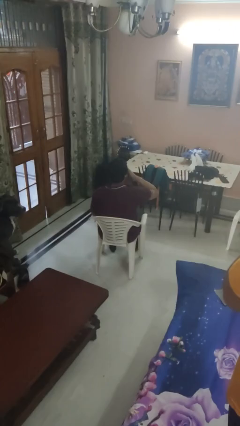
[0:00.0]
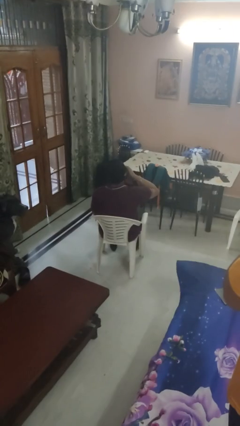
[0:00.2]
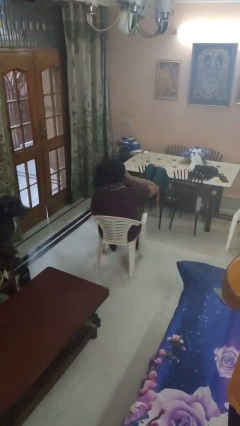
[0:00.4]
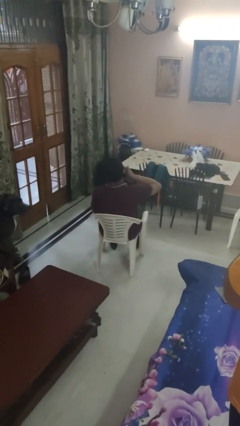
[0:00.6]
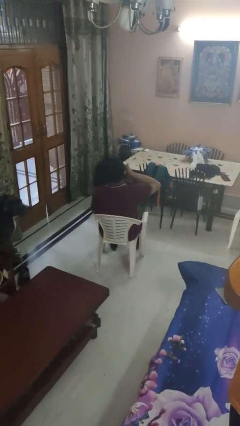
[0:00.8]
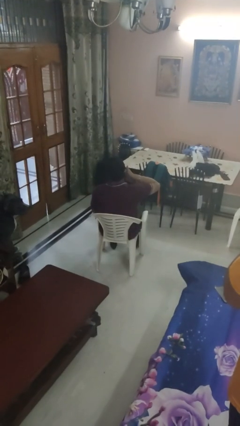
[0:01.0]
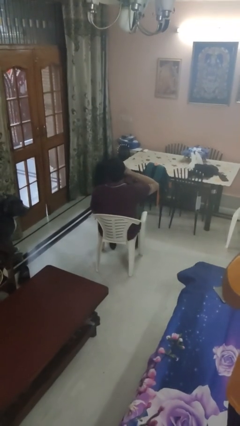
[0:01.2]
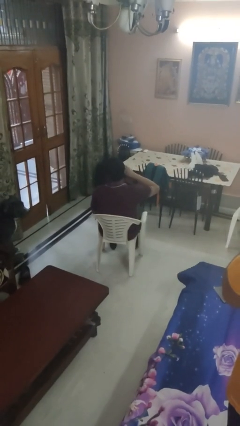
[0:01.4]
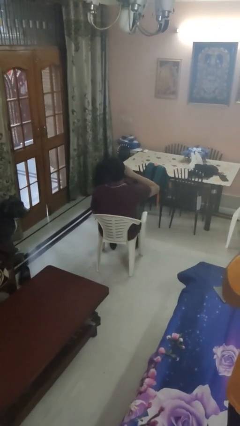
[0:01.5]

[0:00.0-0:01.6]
person rubs eyes

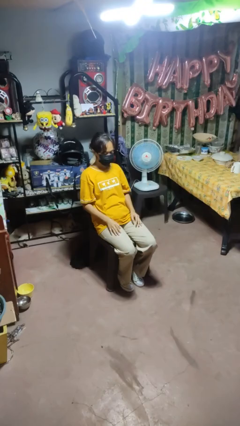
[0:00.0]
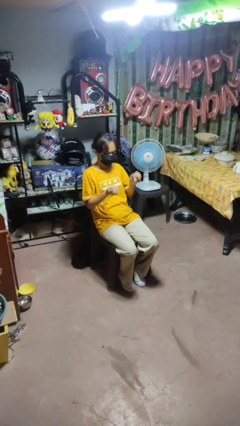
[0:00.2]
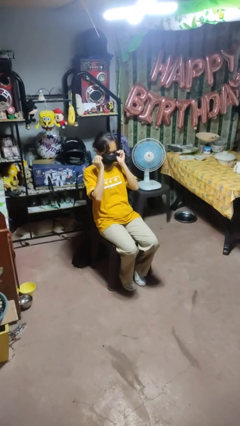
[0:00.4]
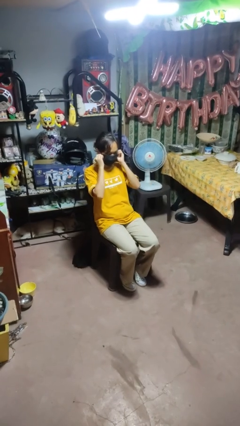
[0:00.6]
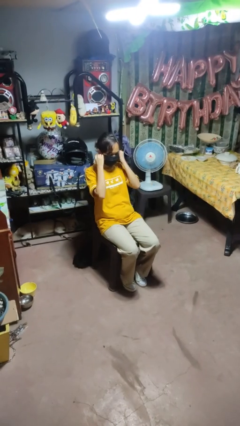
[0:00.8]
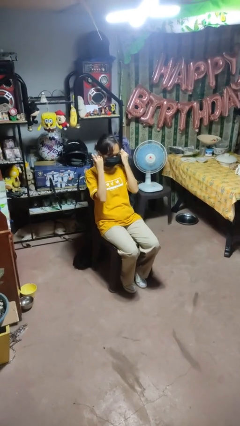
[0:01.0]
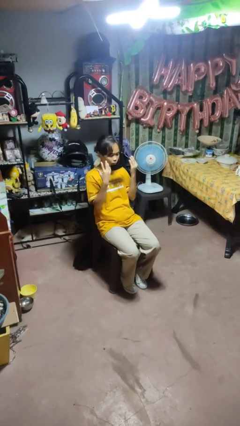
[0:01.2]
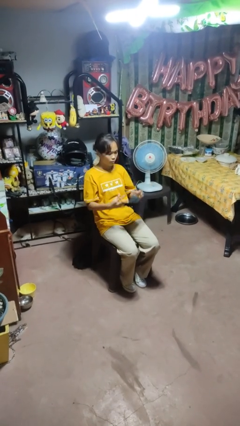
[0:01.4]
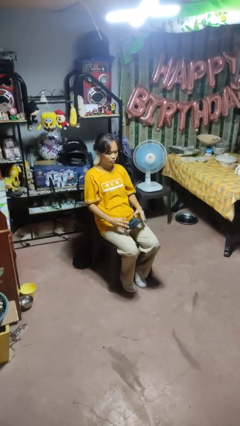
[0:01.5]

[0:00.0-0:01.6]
person takes off facemask

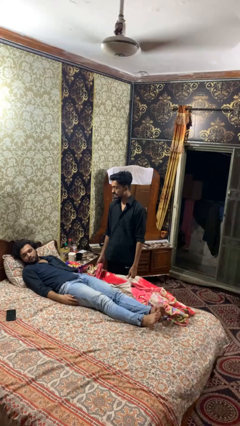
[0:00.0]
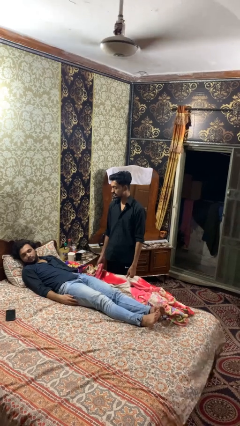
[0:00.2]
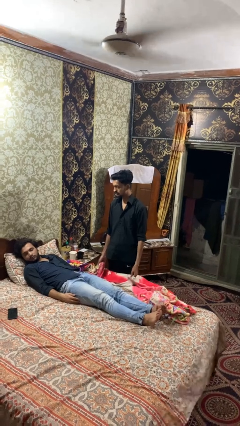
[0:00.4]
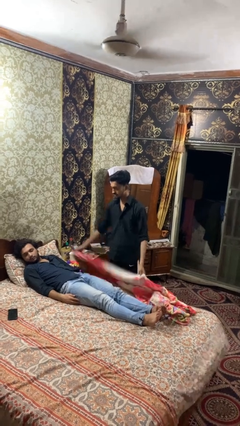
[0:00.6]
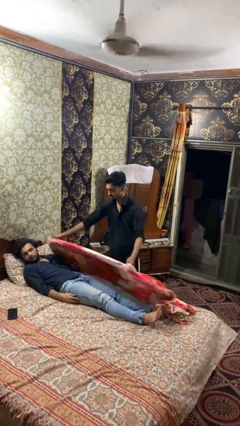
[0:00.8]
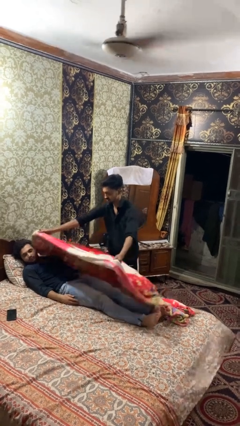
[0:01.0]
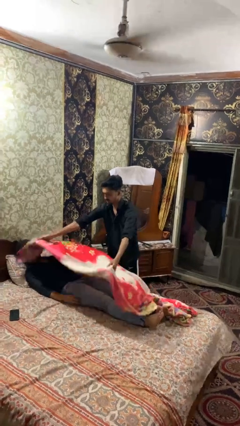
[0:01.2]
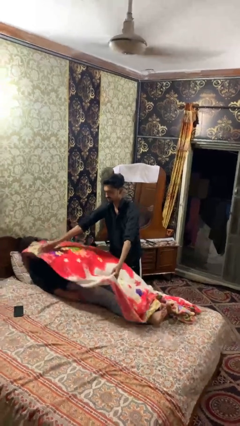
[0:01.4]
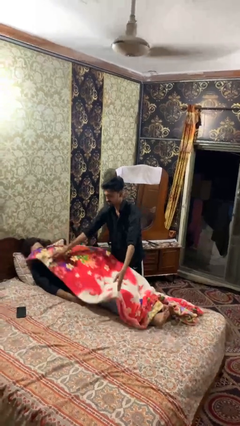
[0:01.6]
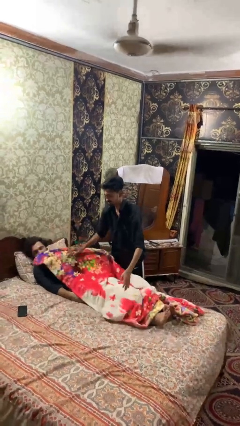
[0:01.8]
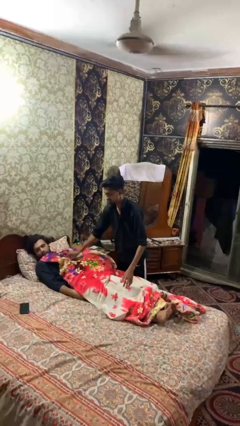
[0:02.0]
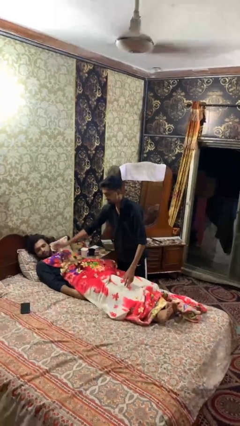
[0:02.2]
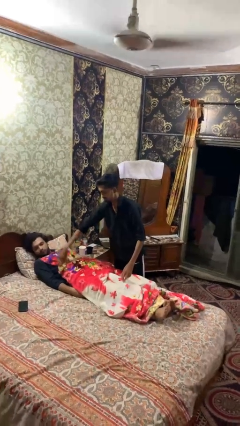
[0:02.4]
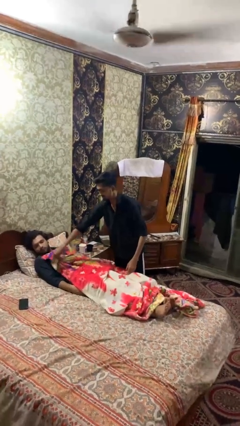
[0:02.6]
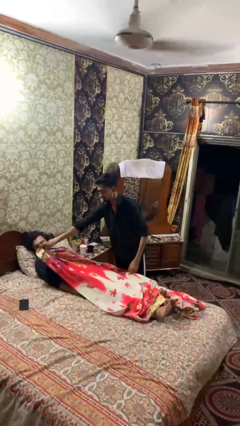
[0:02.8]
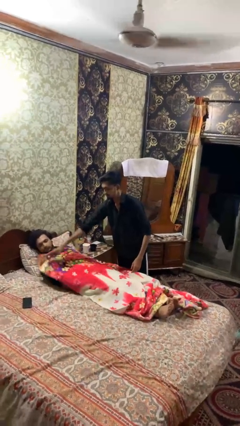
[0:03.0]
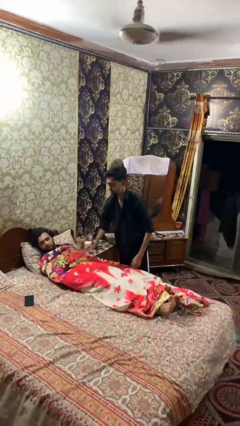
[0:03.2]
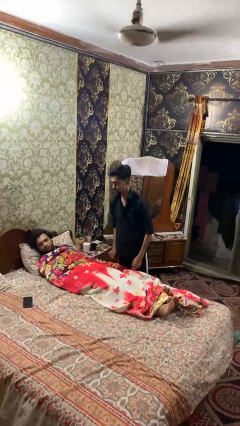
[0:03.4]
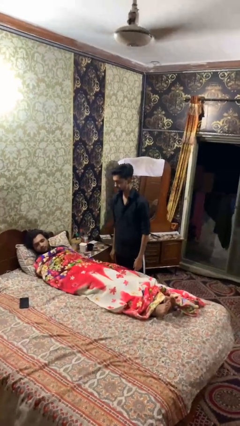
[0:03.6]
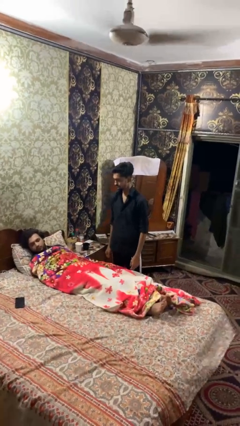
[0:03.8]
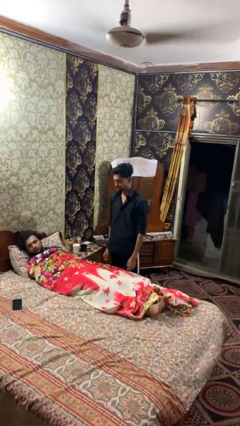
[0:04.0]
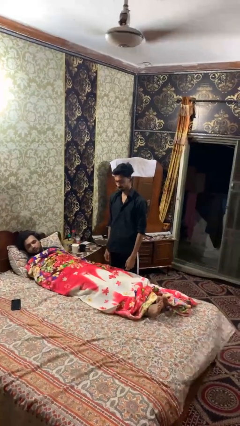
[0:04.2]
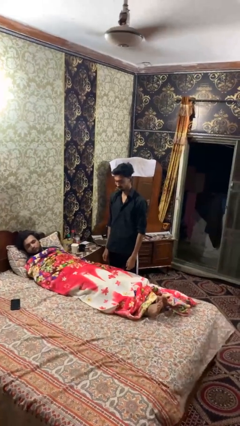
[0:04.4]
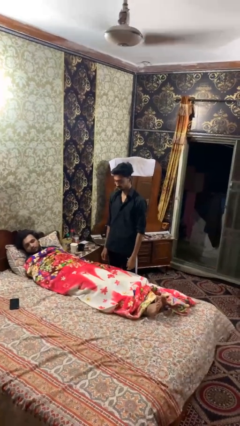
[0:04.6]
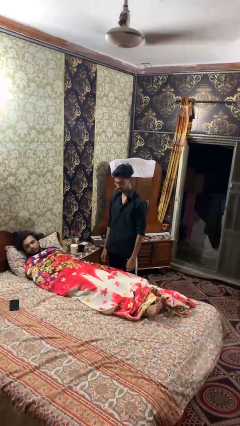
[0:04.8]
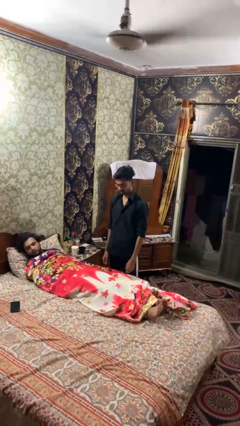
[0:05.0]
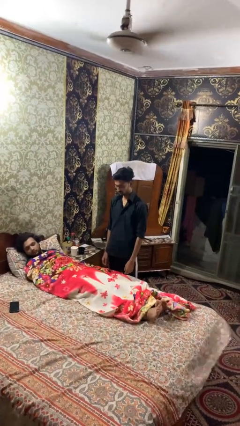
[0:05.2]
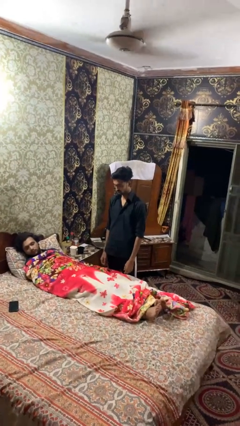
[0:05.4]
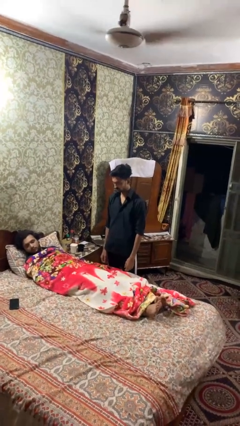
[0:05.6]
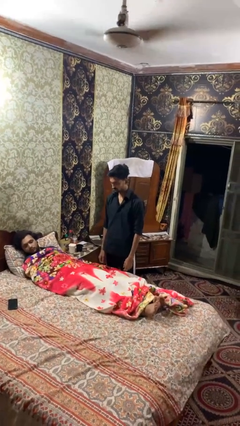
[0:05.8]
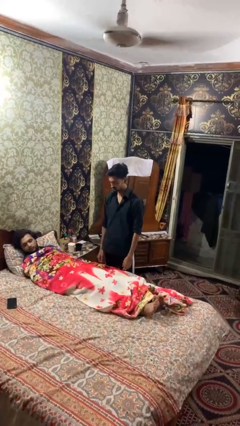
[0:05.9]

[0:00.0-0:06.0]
person covers friend with blanket

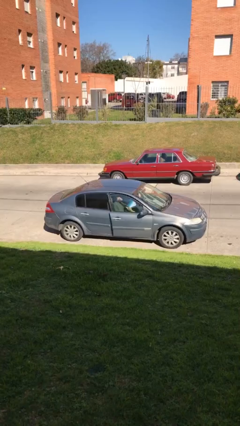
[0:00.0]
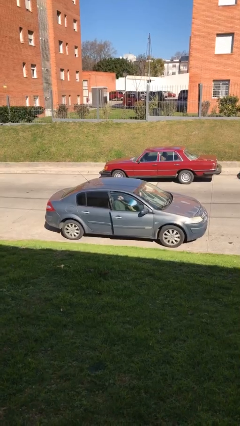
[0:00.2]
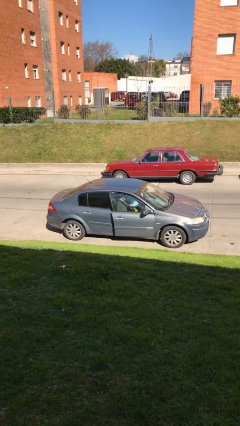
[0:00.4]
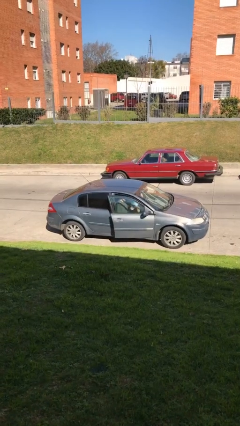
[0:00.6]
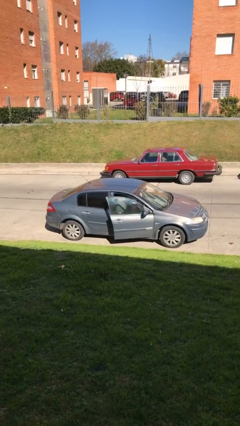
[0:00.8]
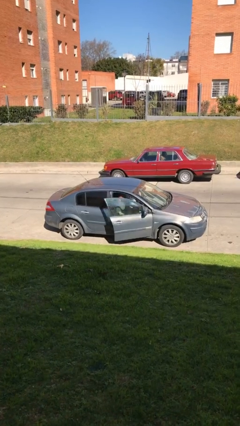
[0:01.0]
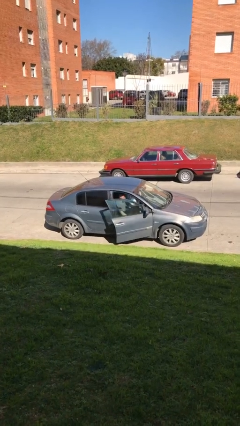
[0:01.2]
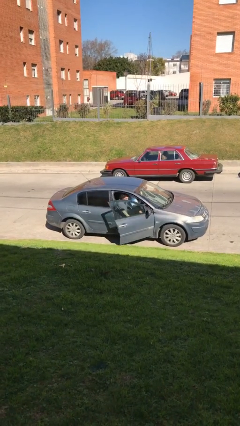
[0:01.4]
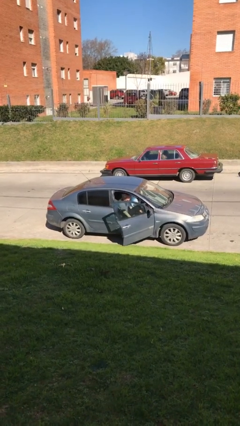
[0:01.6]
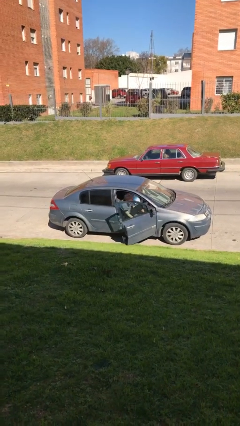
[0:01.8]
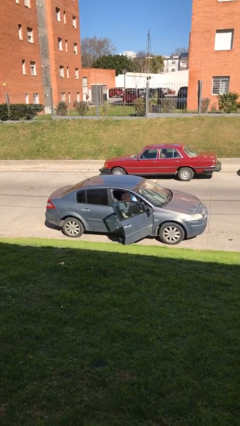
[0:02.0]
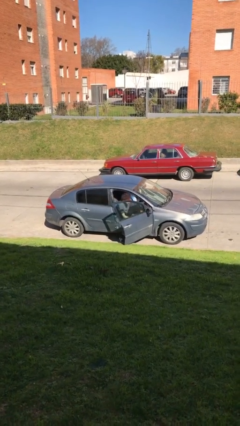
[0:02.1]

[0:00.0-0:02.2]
person opens car door

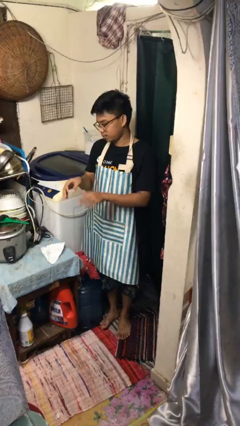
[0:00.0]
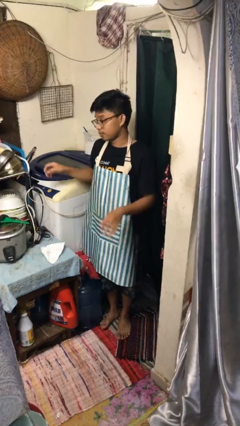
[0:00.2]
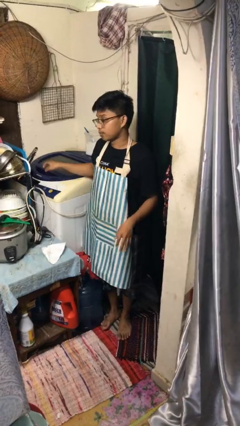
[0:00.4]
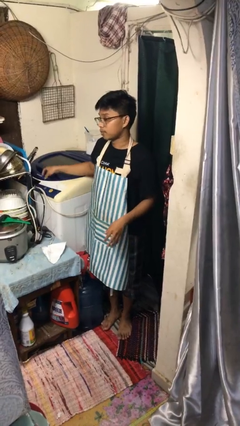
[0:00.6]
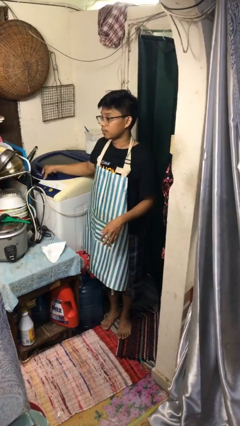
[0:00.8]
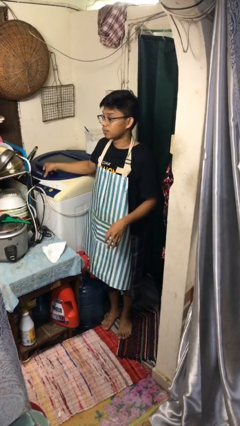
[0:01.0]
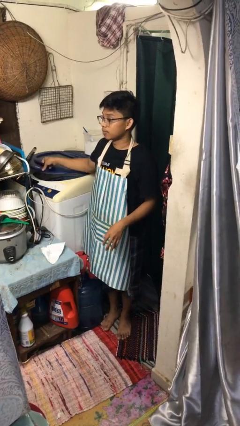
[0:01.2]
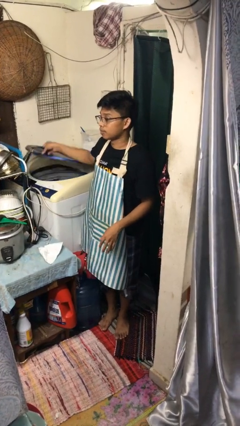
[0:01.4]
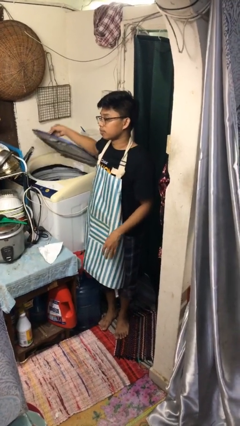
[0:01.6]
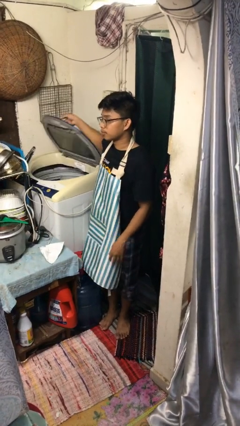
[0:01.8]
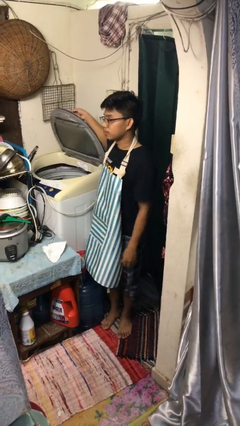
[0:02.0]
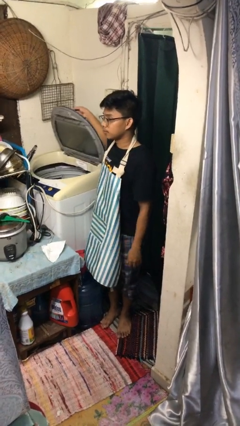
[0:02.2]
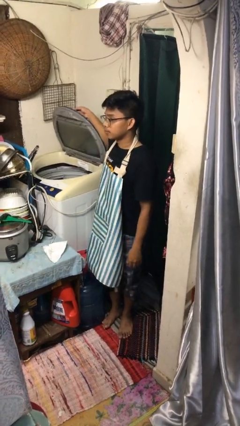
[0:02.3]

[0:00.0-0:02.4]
person opens clothes washer

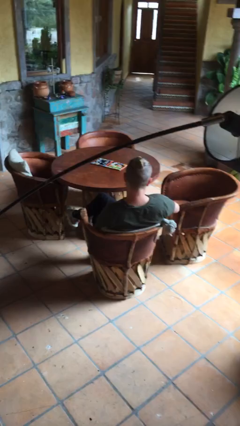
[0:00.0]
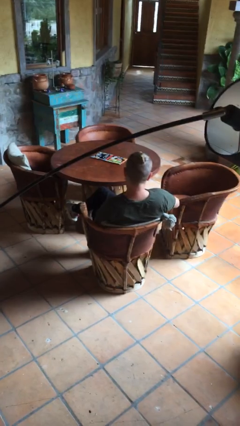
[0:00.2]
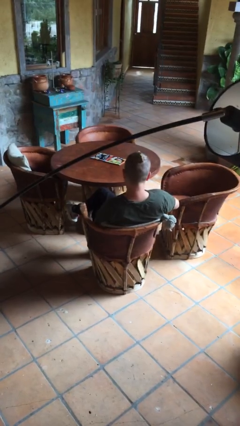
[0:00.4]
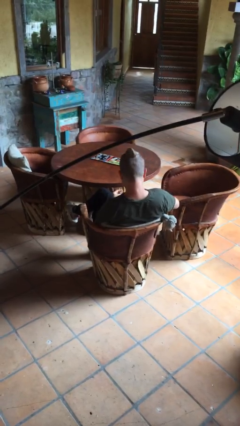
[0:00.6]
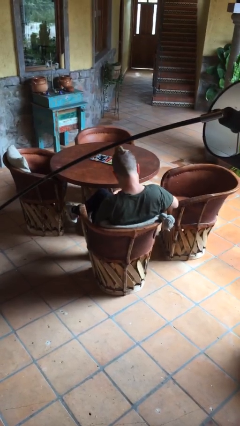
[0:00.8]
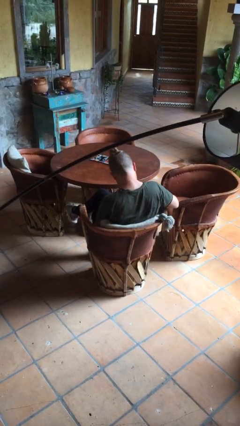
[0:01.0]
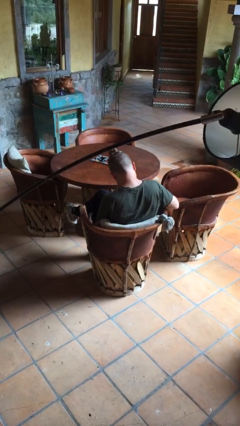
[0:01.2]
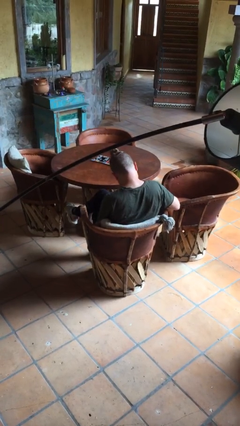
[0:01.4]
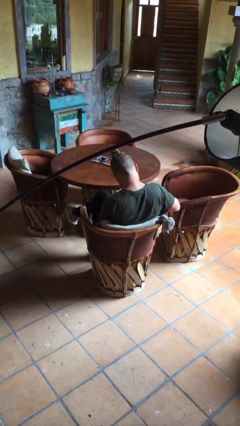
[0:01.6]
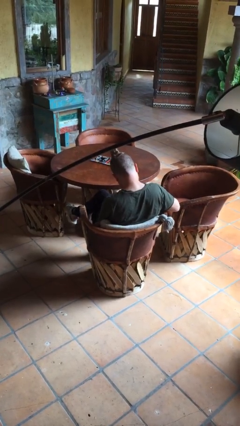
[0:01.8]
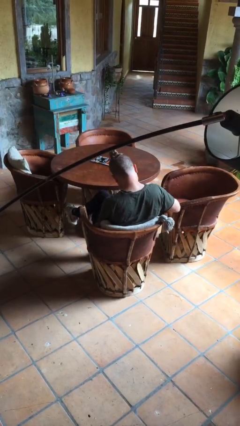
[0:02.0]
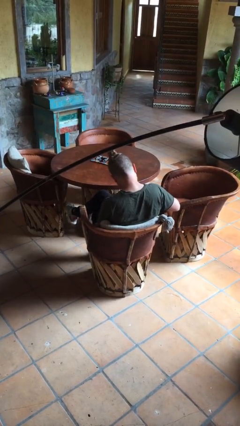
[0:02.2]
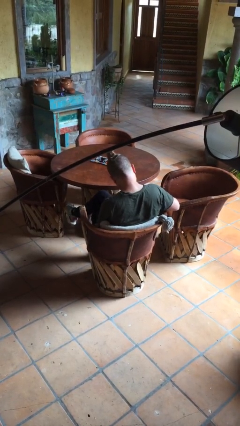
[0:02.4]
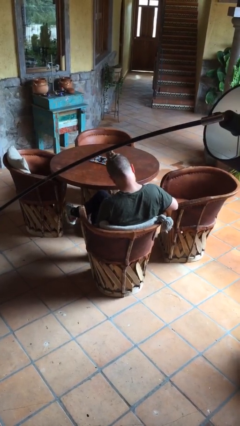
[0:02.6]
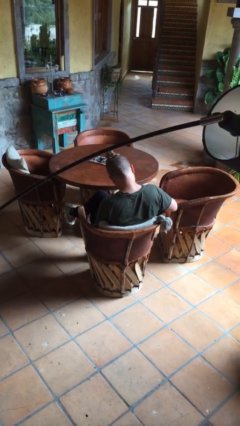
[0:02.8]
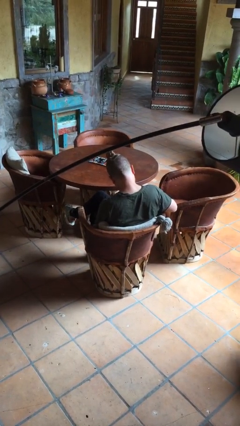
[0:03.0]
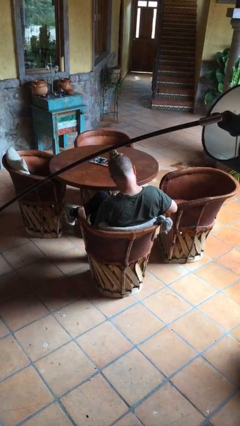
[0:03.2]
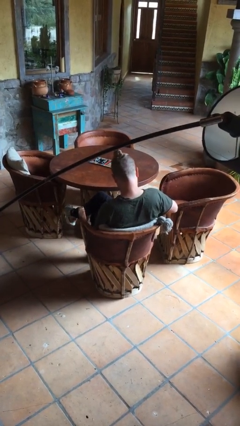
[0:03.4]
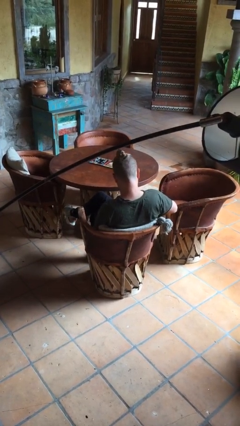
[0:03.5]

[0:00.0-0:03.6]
person clips fingernails
